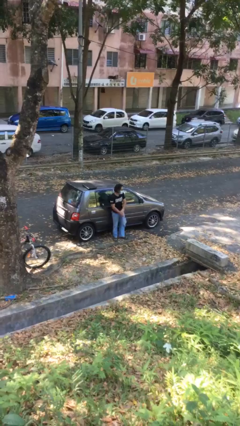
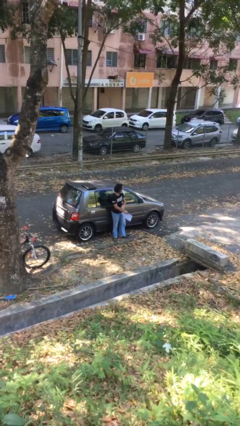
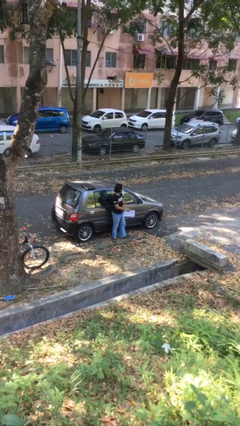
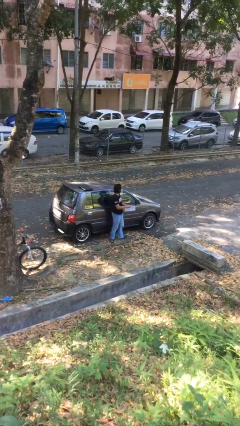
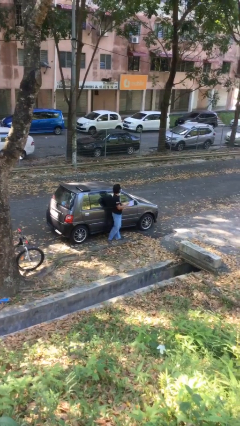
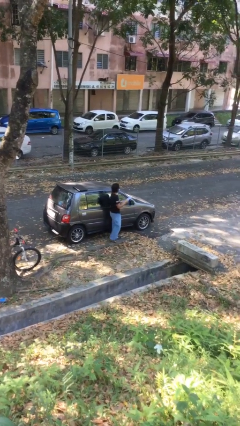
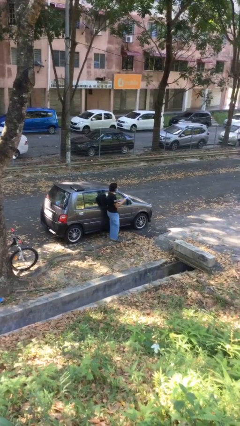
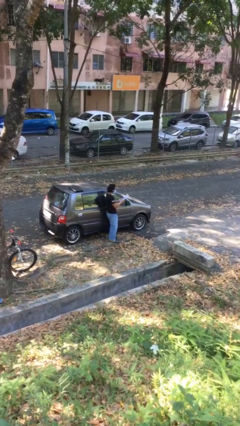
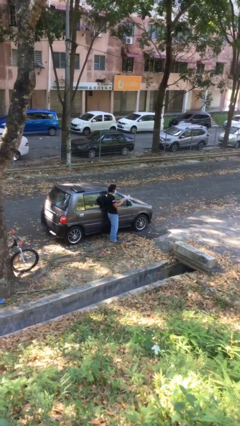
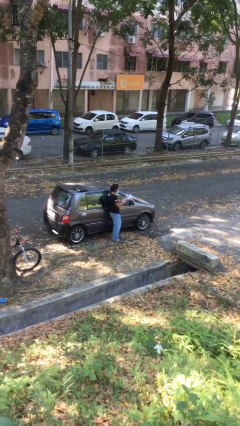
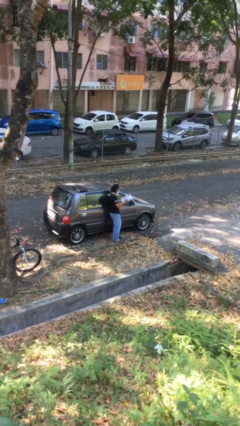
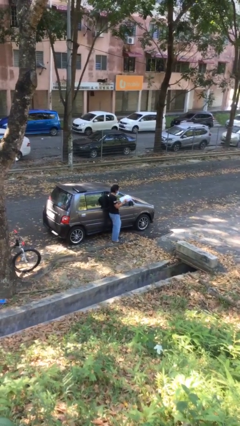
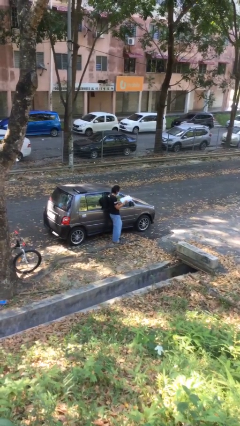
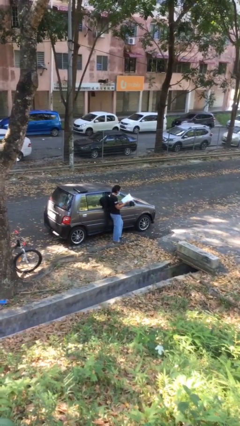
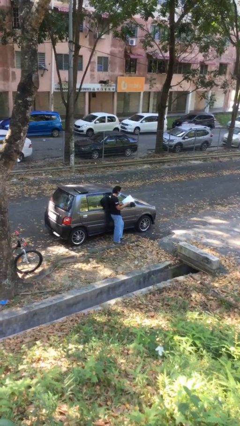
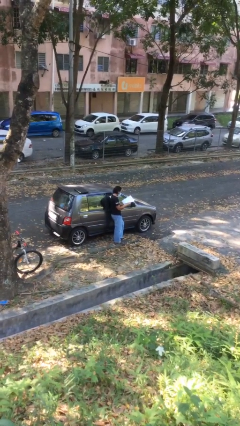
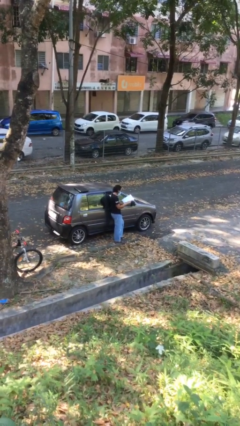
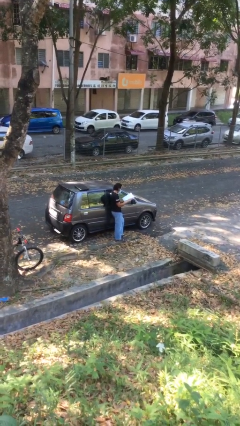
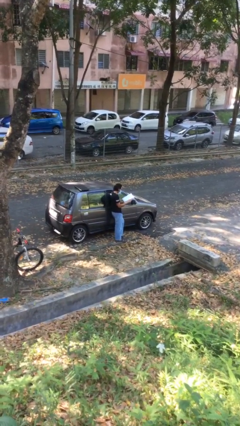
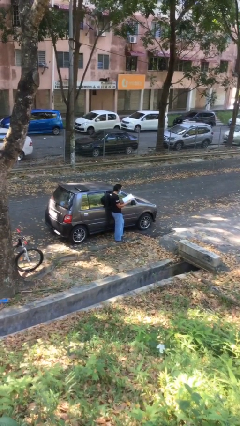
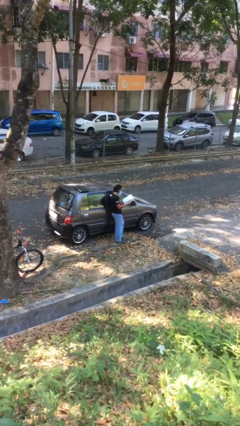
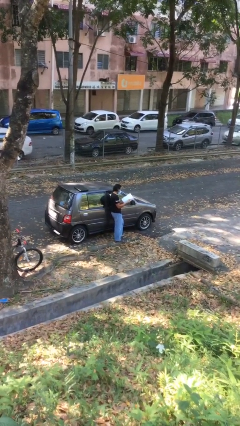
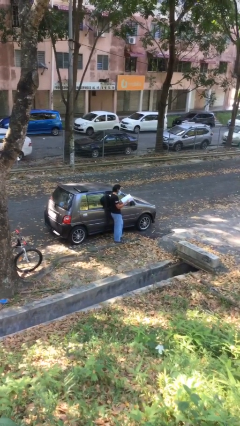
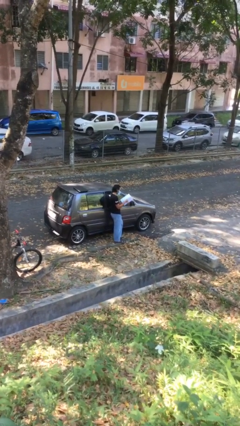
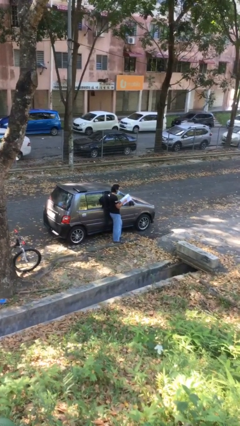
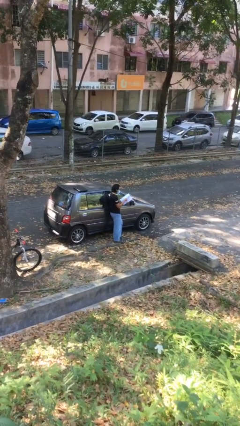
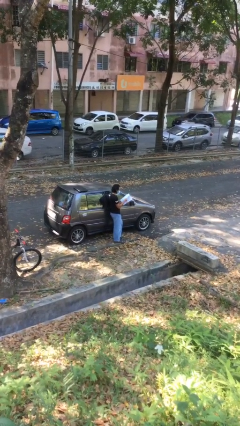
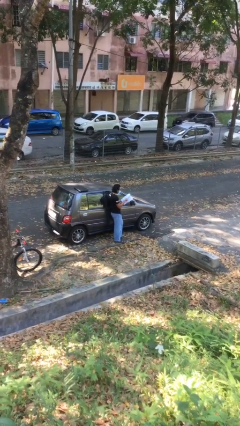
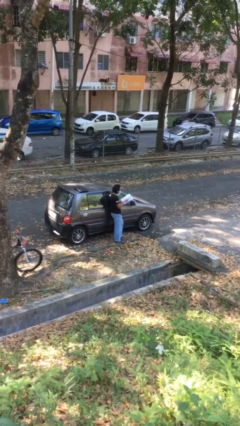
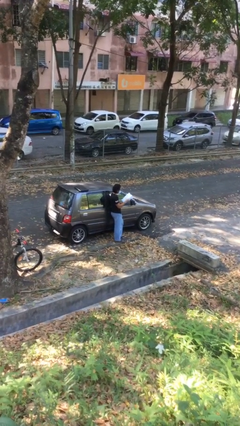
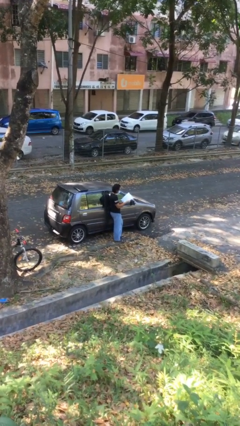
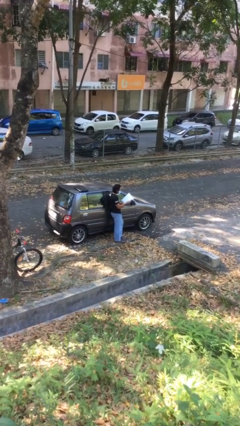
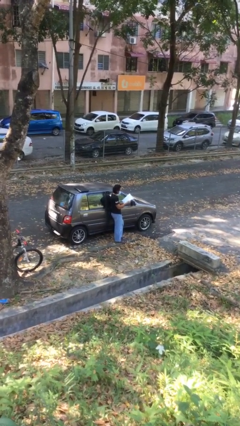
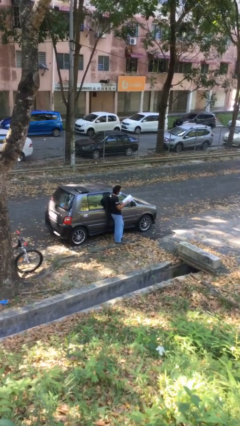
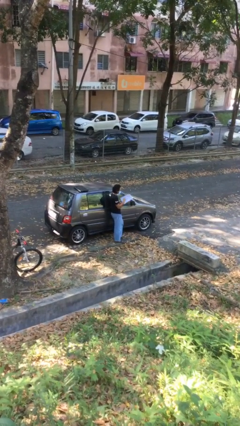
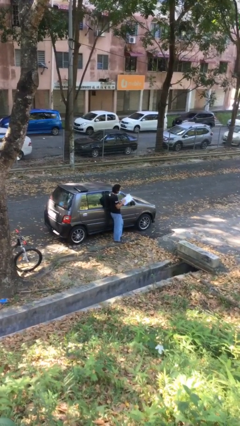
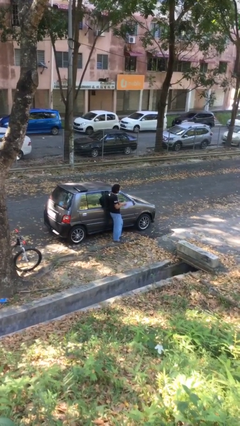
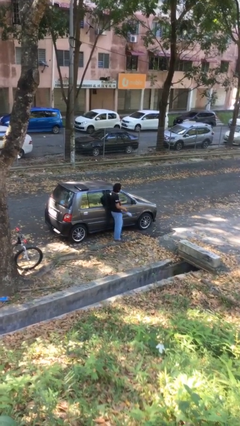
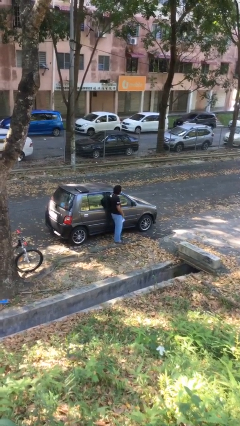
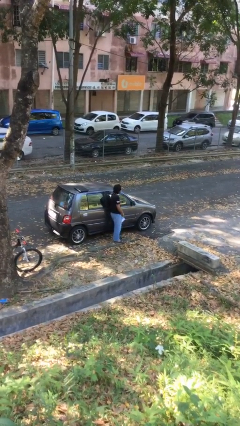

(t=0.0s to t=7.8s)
person reads document

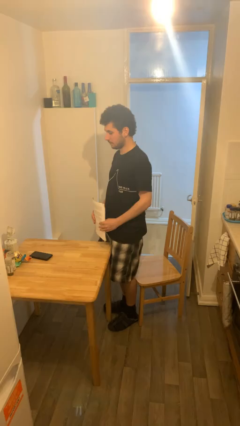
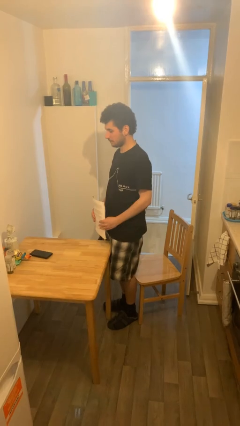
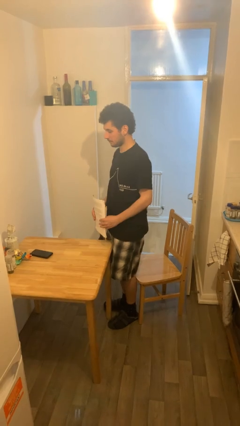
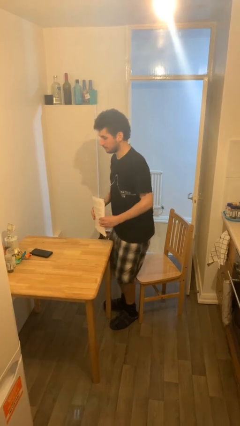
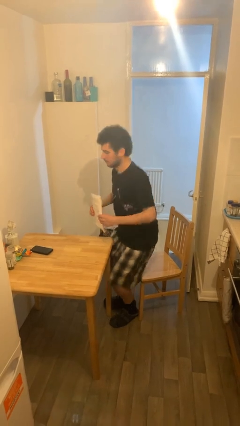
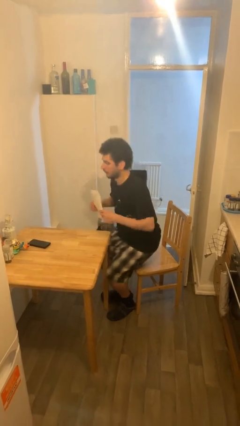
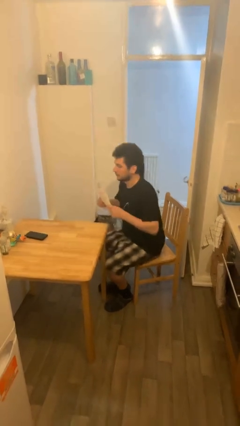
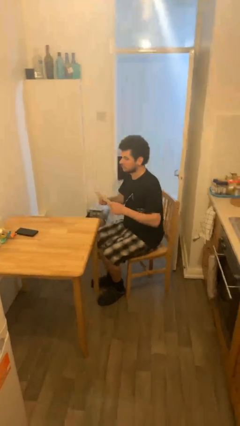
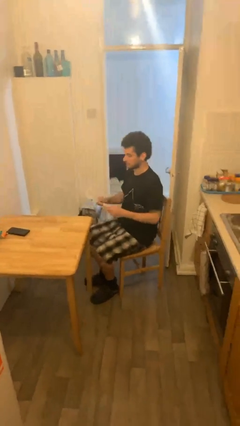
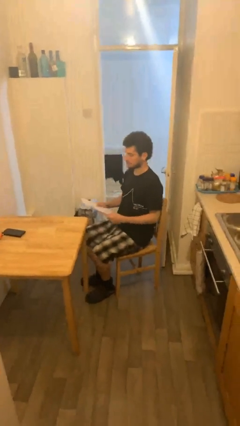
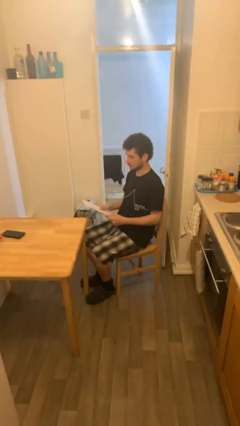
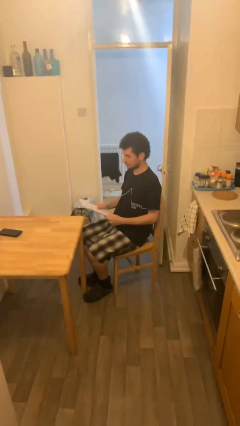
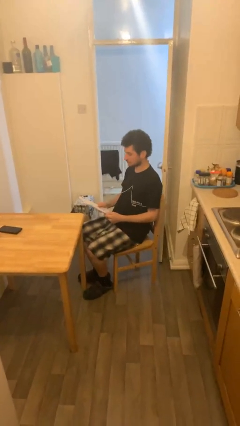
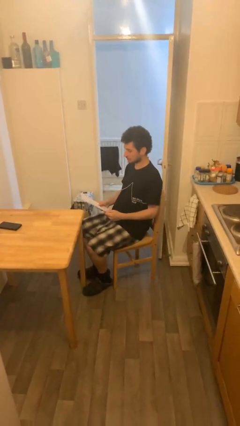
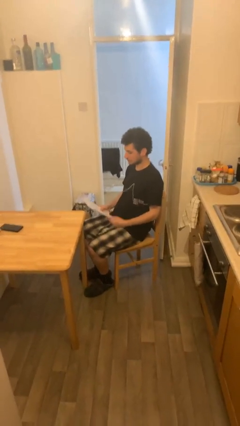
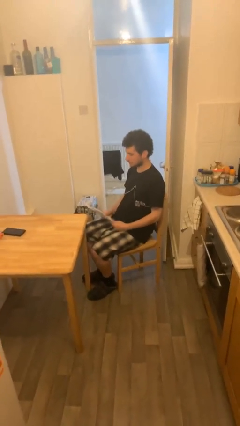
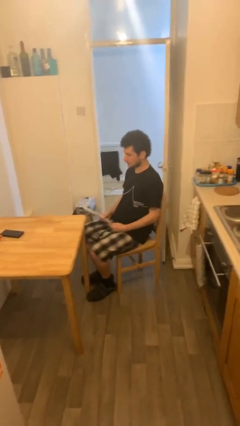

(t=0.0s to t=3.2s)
person sits down

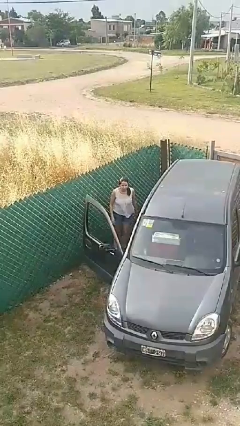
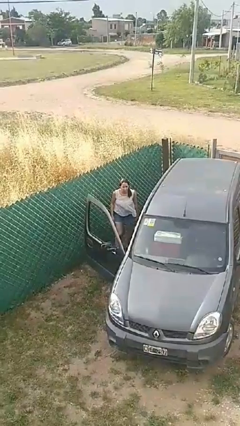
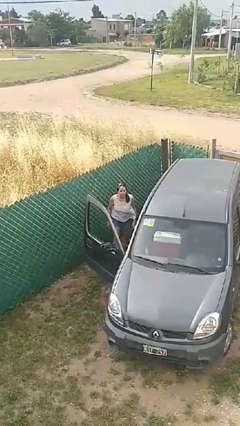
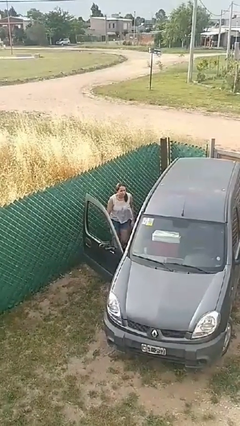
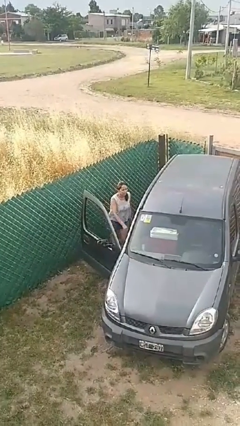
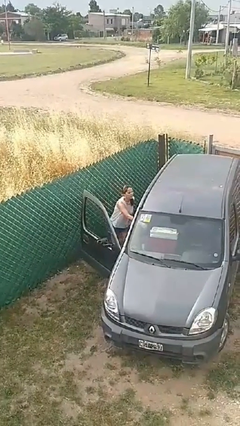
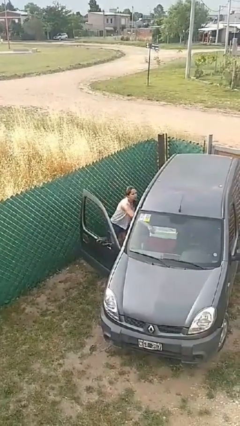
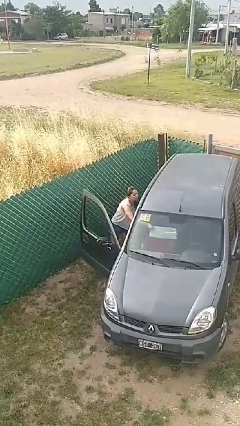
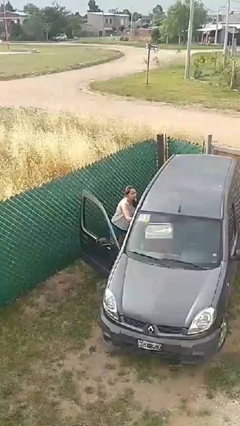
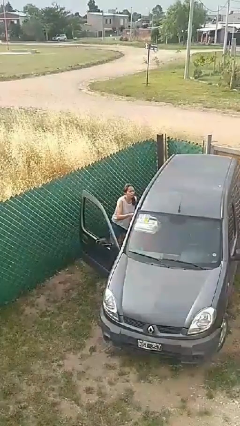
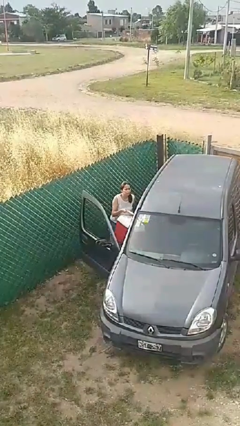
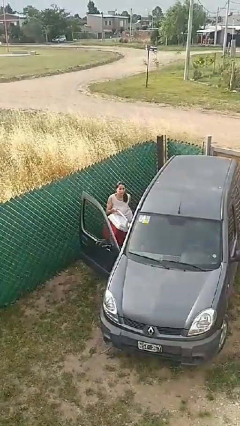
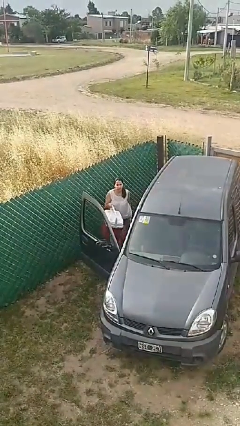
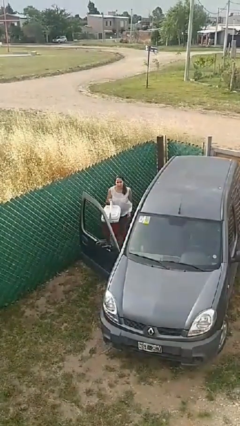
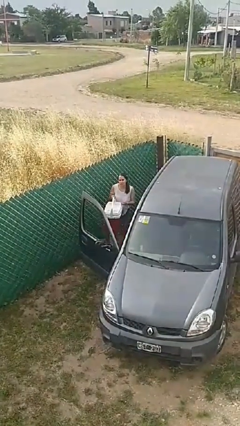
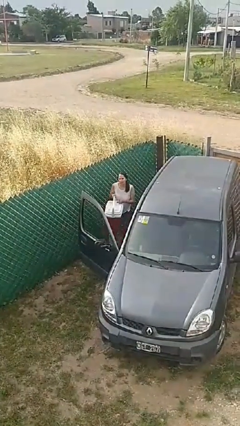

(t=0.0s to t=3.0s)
person unloads car

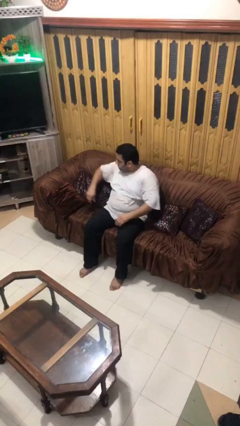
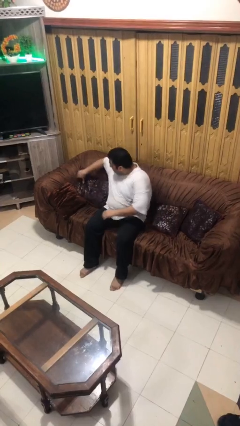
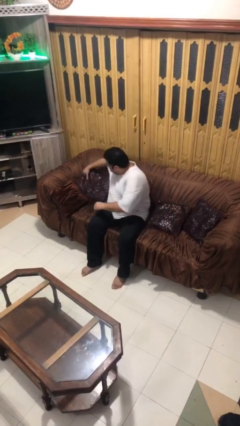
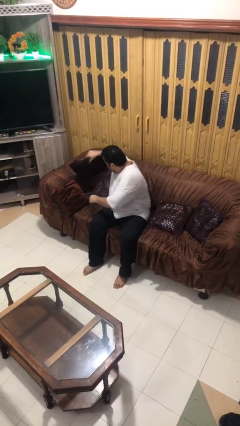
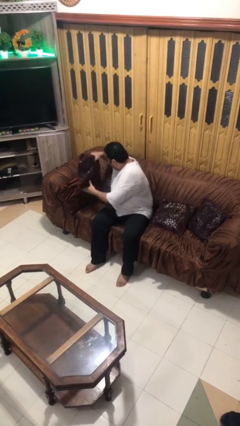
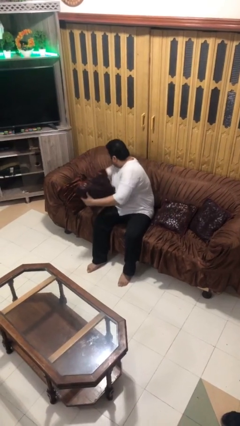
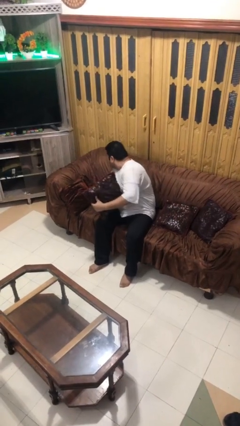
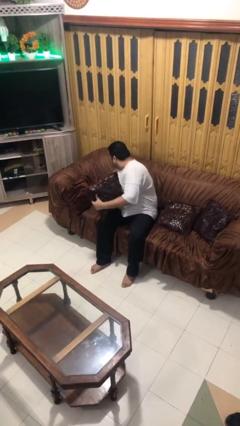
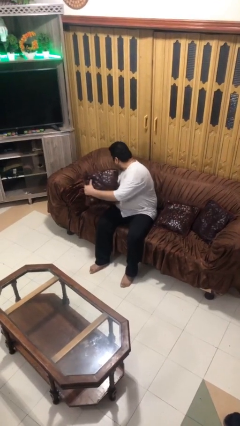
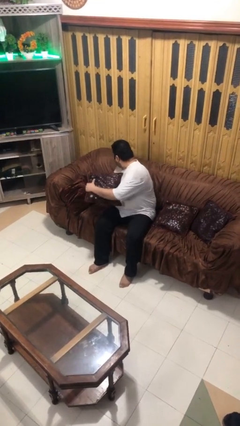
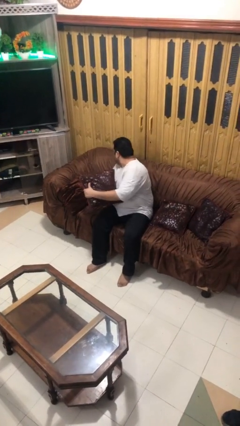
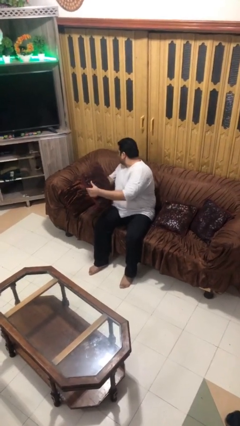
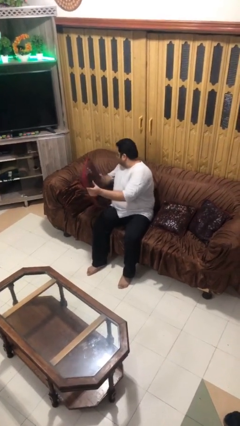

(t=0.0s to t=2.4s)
person searches in couch

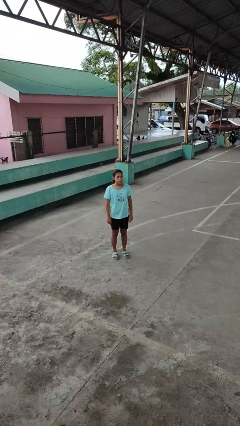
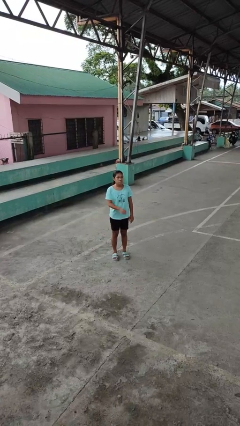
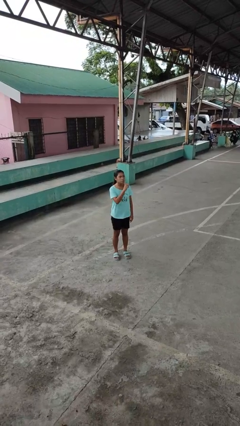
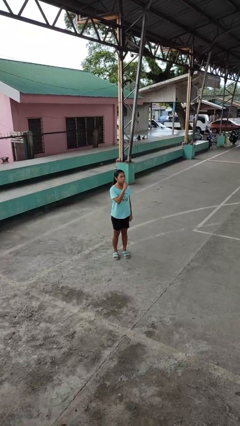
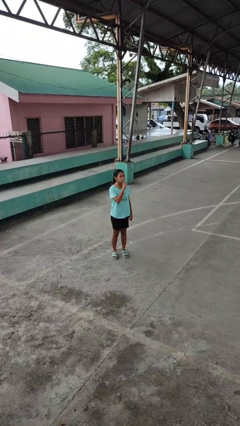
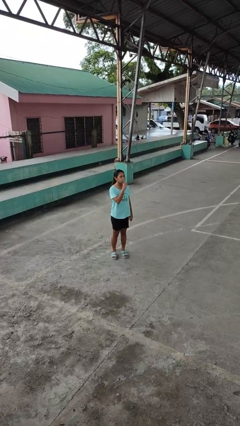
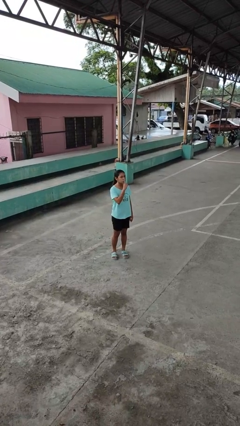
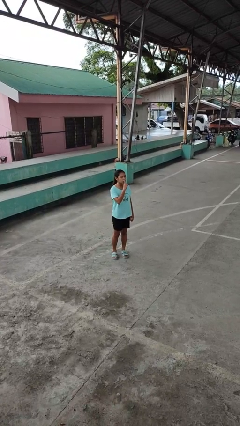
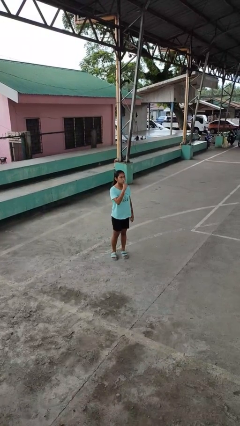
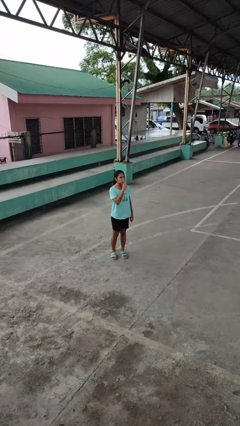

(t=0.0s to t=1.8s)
person gestures be quiet
